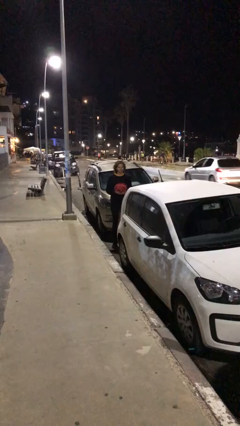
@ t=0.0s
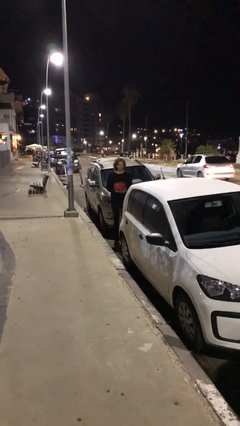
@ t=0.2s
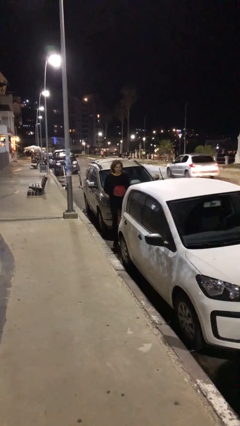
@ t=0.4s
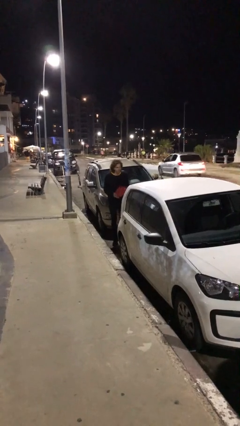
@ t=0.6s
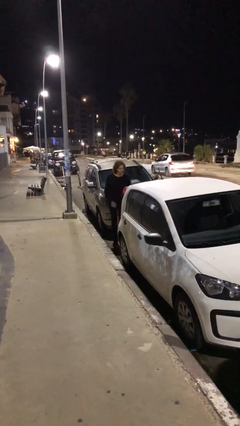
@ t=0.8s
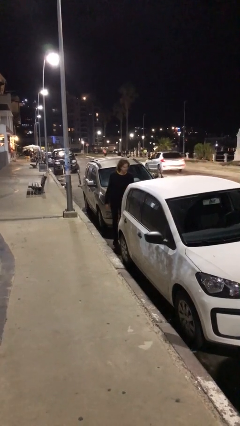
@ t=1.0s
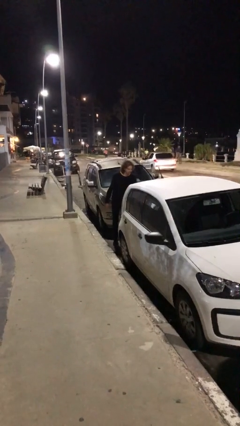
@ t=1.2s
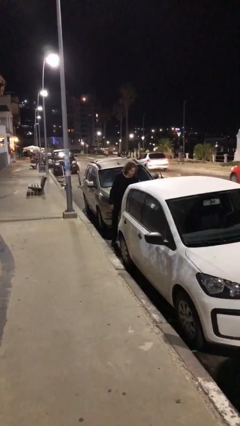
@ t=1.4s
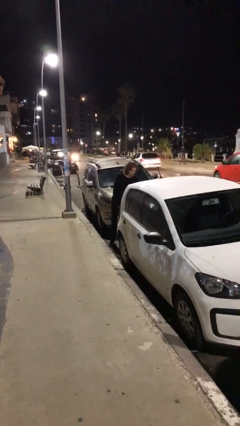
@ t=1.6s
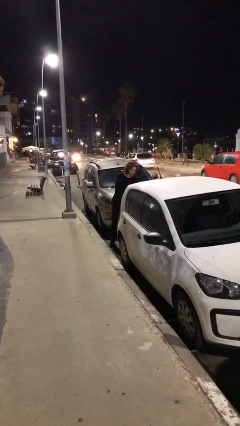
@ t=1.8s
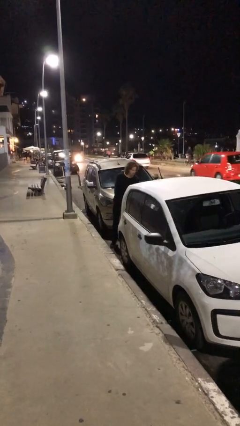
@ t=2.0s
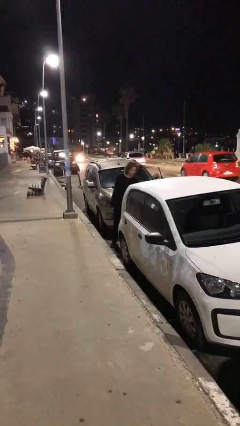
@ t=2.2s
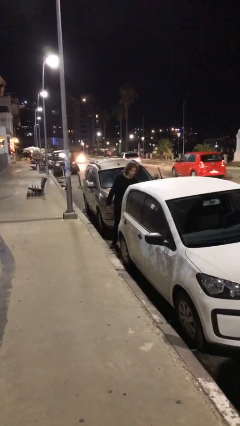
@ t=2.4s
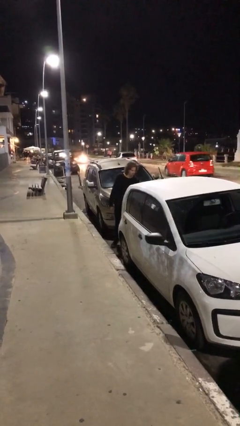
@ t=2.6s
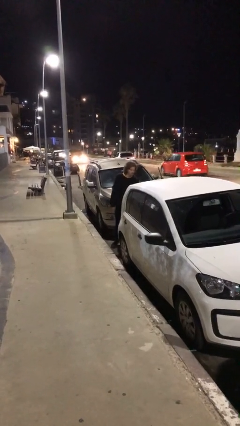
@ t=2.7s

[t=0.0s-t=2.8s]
person loads car

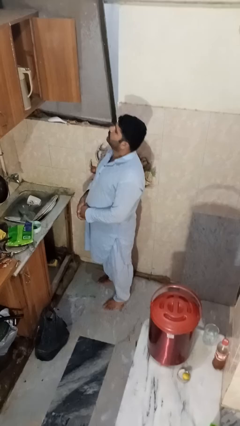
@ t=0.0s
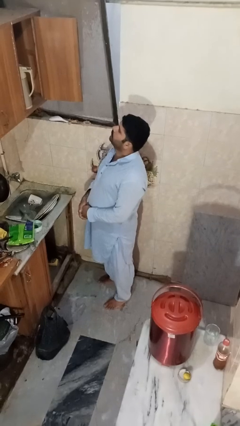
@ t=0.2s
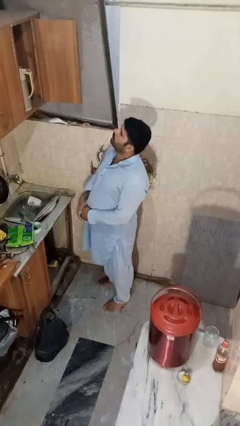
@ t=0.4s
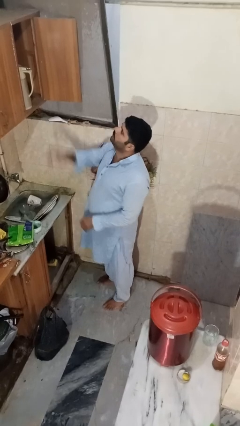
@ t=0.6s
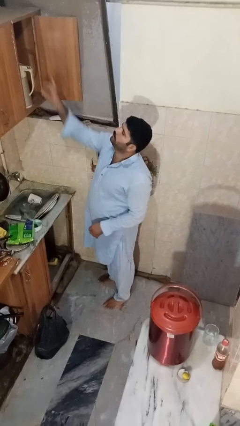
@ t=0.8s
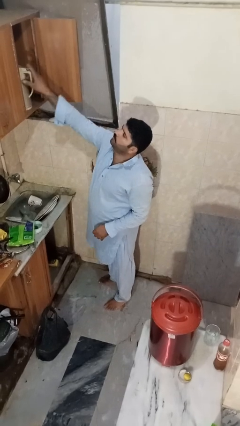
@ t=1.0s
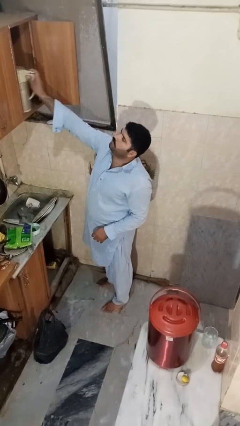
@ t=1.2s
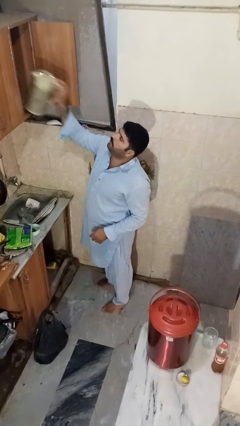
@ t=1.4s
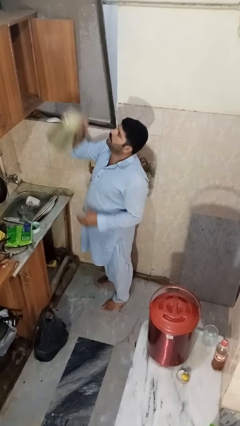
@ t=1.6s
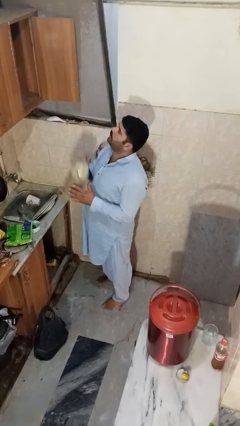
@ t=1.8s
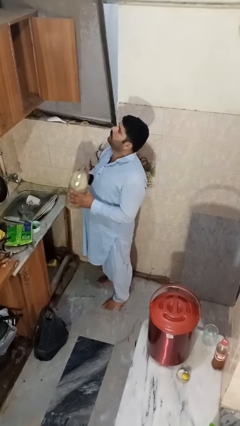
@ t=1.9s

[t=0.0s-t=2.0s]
person takes object from cabinet

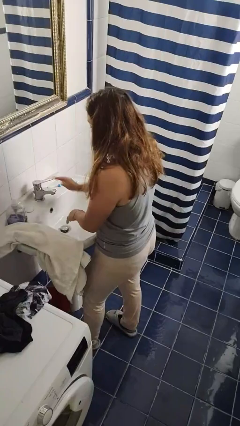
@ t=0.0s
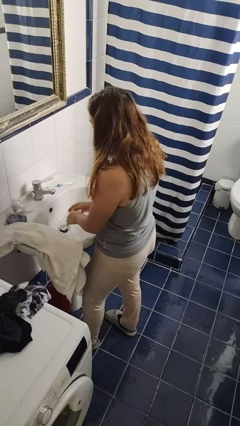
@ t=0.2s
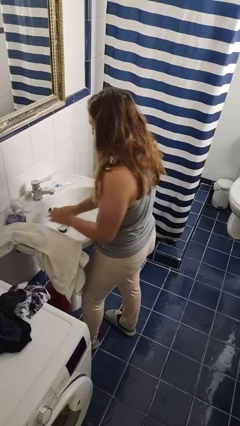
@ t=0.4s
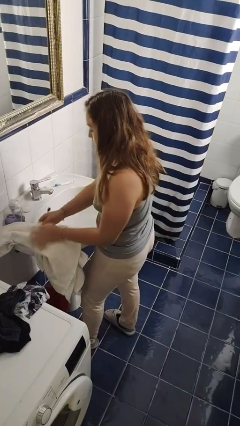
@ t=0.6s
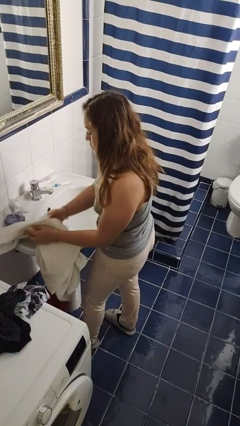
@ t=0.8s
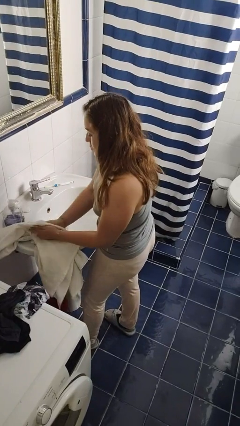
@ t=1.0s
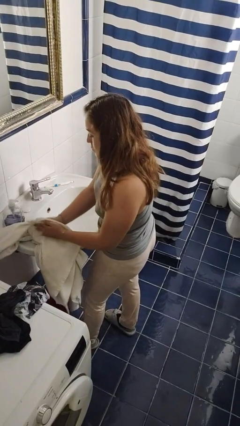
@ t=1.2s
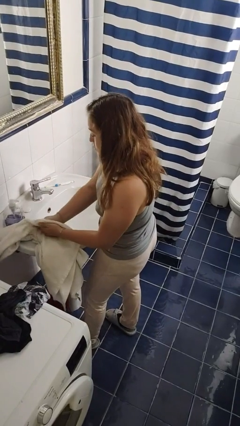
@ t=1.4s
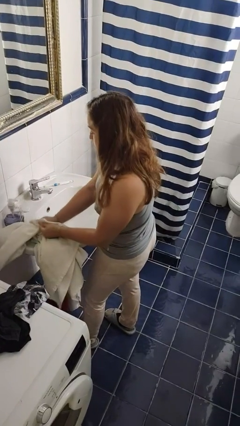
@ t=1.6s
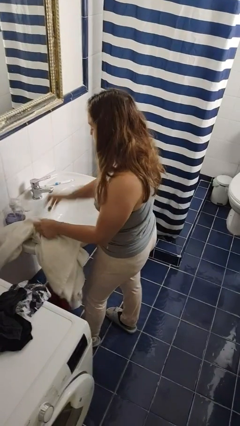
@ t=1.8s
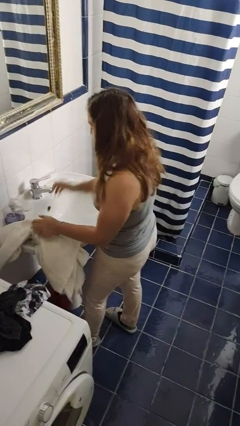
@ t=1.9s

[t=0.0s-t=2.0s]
person dries hands with towel

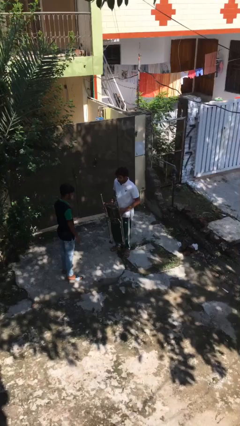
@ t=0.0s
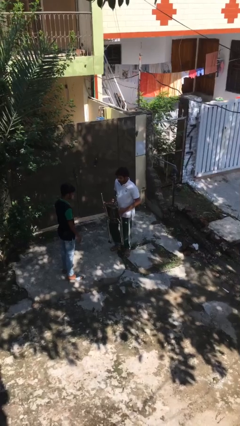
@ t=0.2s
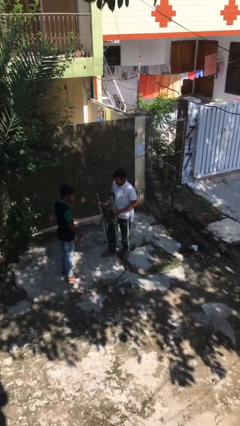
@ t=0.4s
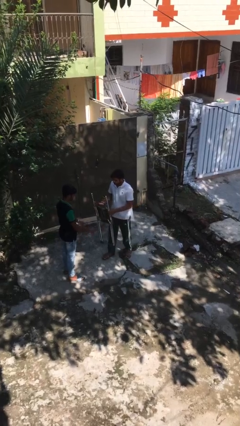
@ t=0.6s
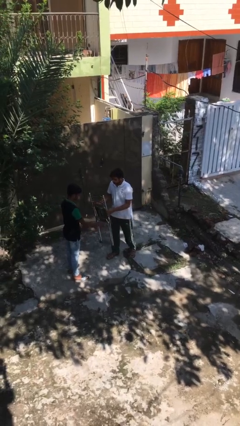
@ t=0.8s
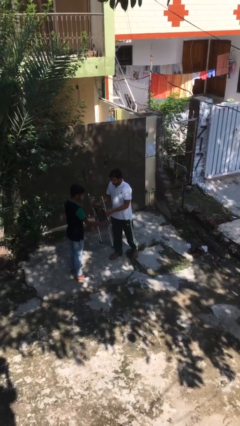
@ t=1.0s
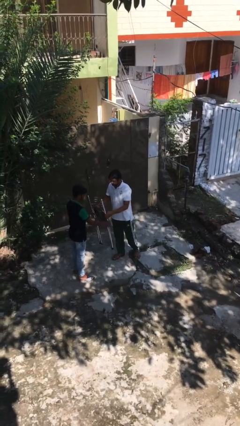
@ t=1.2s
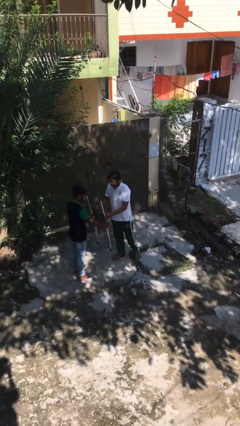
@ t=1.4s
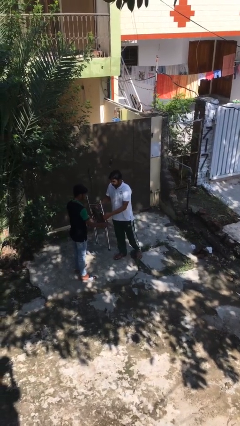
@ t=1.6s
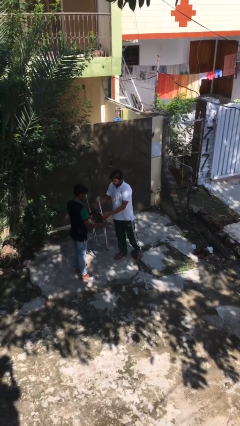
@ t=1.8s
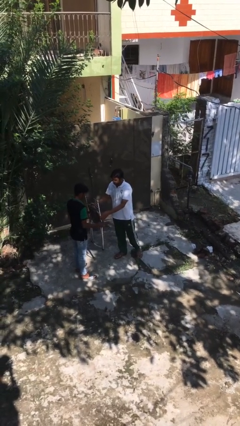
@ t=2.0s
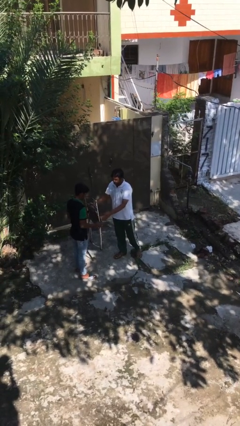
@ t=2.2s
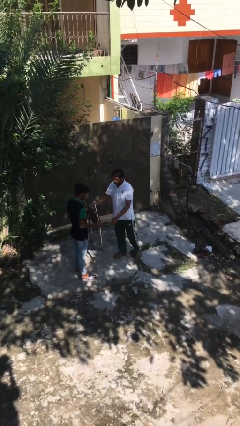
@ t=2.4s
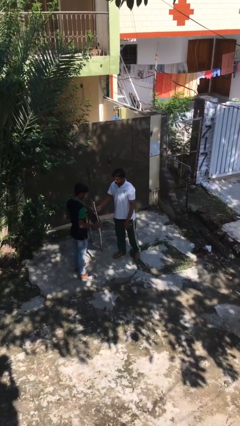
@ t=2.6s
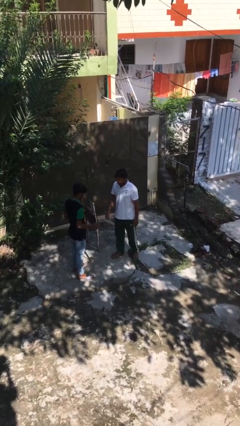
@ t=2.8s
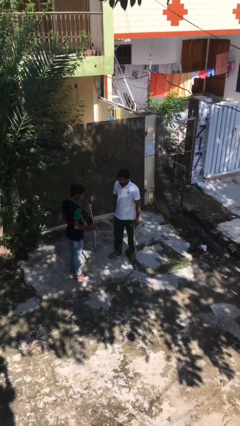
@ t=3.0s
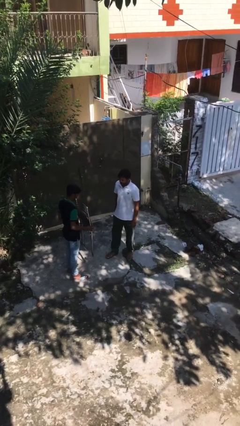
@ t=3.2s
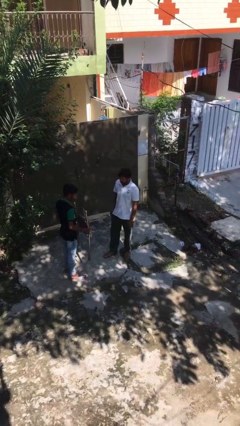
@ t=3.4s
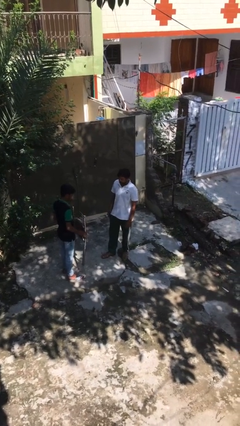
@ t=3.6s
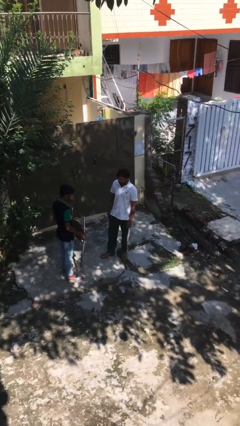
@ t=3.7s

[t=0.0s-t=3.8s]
person transfers object to person

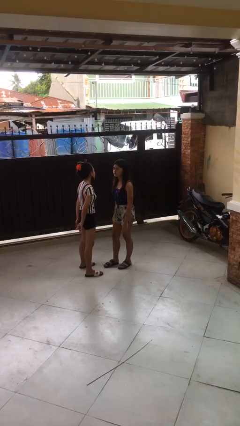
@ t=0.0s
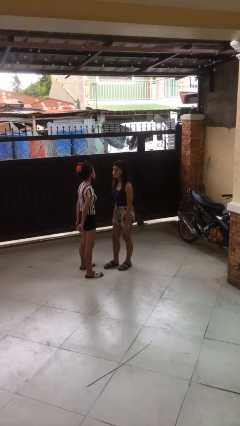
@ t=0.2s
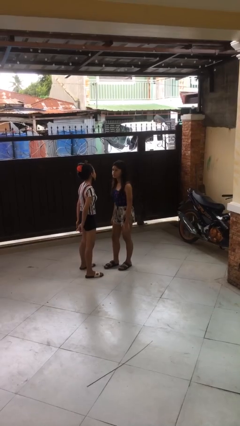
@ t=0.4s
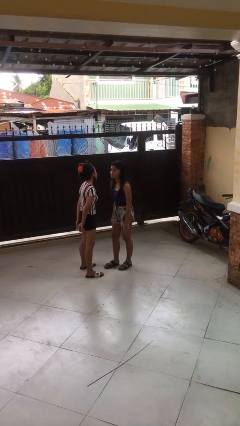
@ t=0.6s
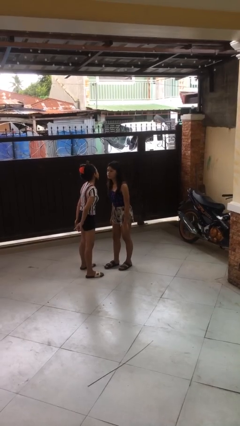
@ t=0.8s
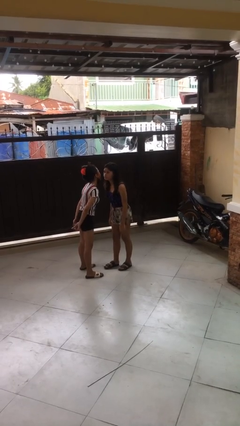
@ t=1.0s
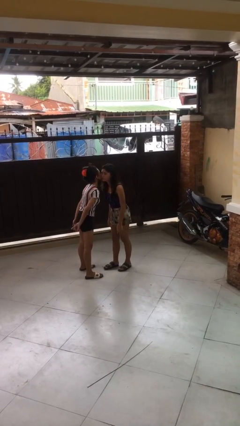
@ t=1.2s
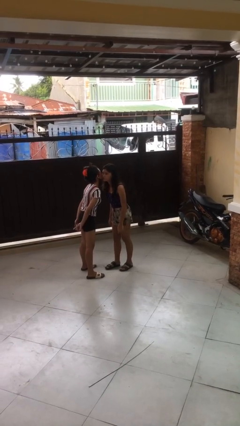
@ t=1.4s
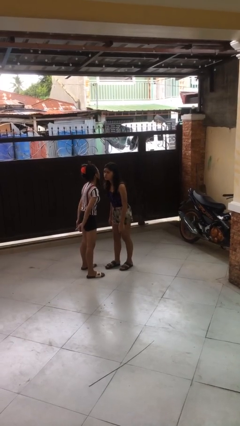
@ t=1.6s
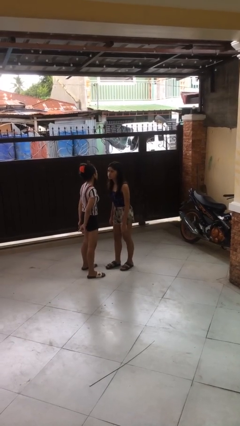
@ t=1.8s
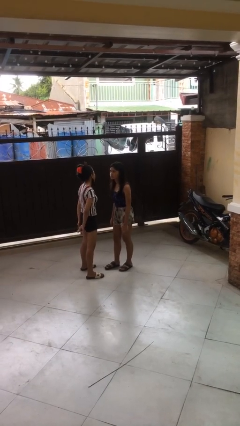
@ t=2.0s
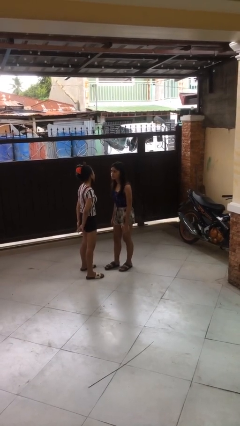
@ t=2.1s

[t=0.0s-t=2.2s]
person kisses cheek of person

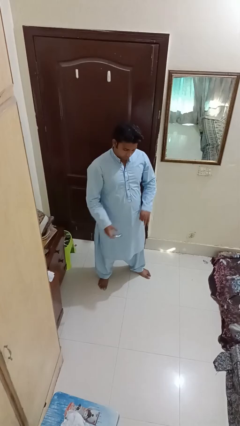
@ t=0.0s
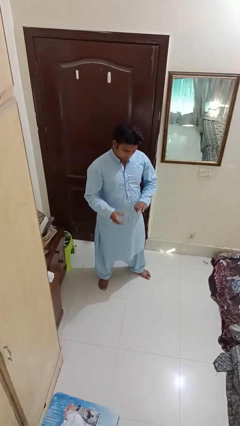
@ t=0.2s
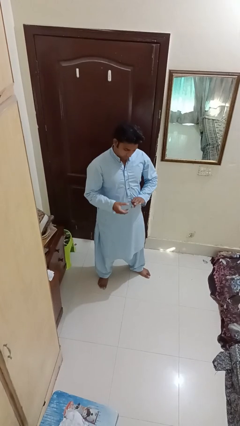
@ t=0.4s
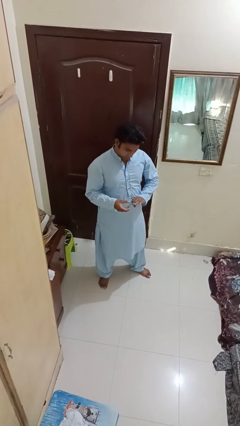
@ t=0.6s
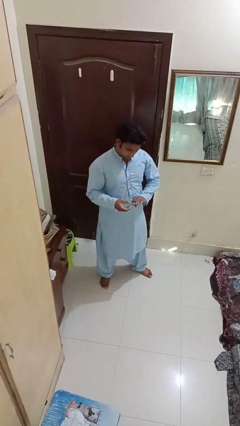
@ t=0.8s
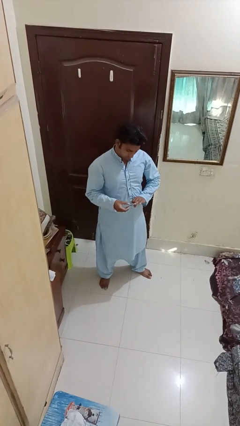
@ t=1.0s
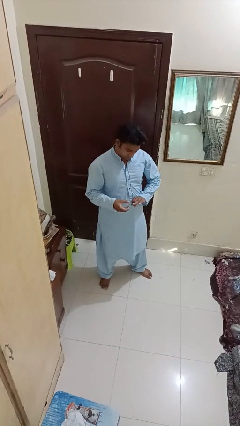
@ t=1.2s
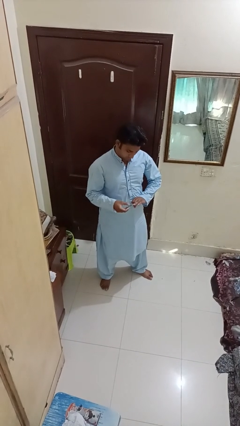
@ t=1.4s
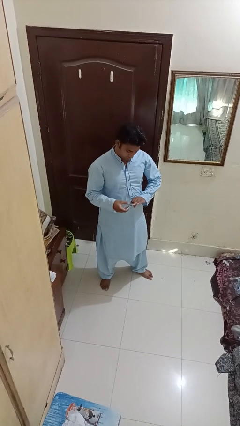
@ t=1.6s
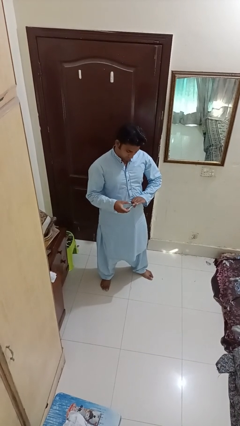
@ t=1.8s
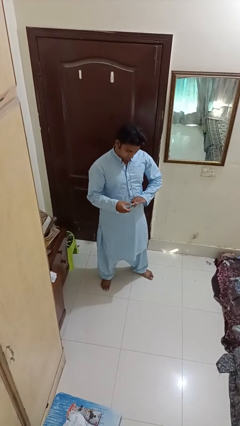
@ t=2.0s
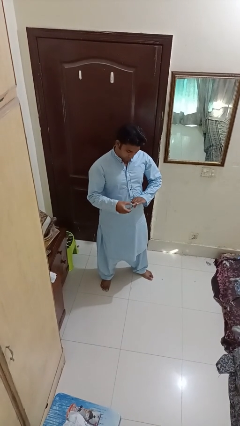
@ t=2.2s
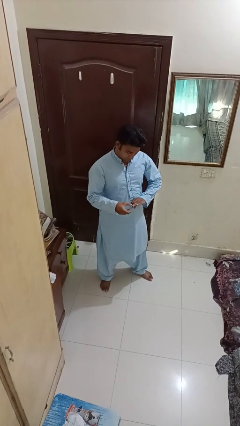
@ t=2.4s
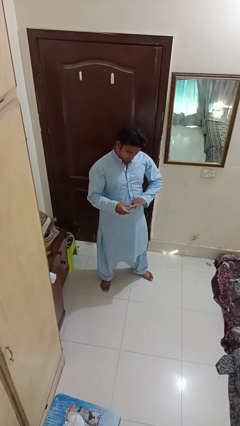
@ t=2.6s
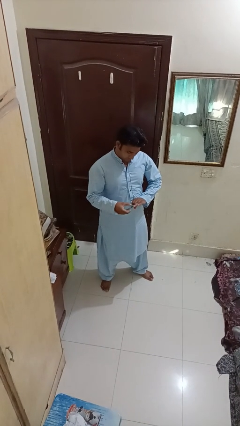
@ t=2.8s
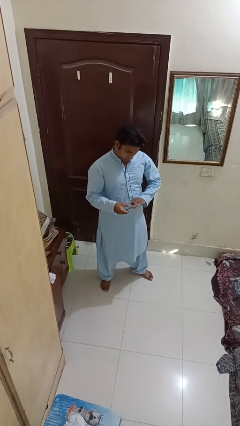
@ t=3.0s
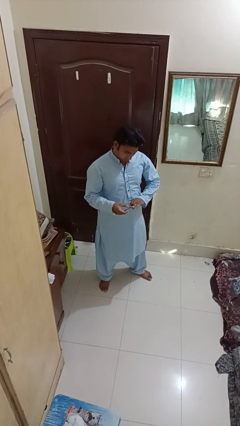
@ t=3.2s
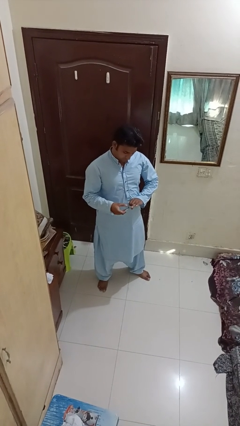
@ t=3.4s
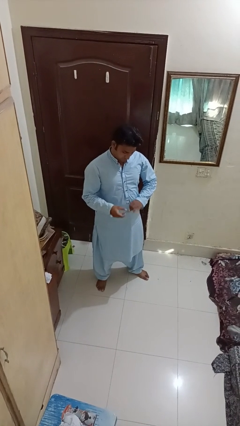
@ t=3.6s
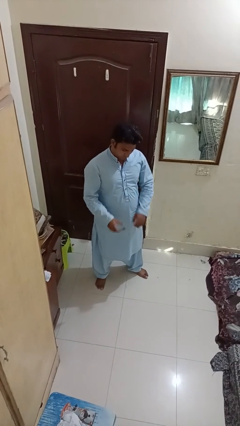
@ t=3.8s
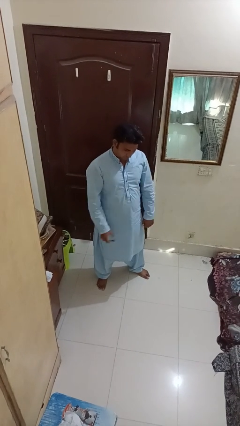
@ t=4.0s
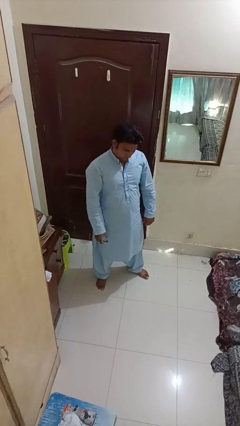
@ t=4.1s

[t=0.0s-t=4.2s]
person clips fingernails
